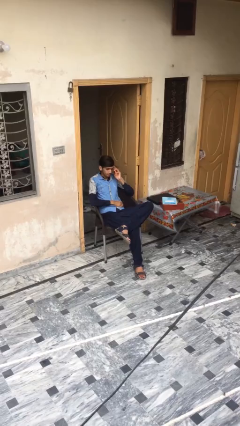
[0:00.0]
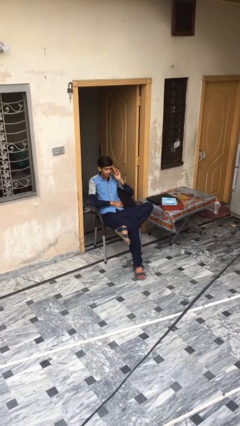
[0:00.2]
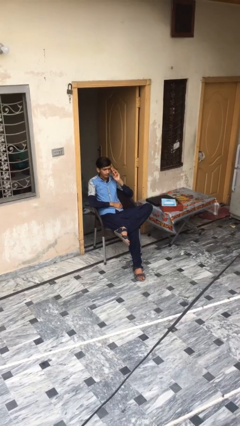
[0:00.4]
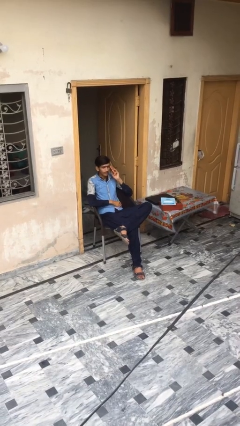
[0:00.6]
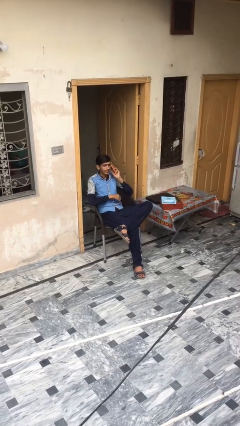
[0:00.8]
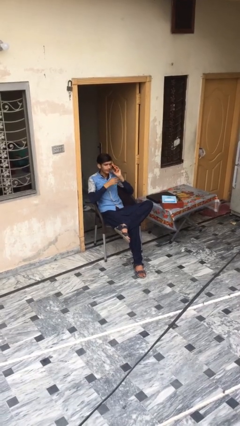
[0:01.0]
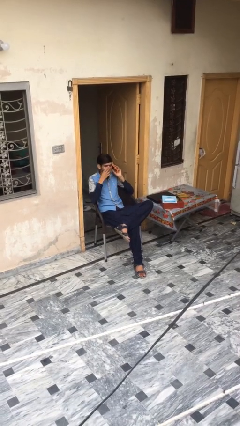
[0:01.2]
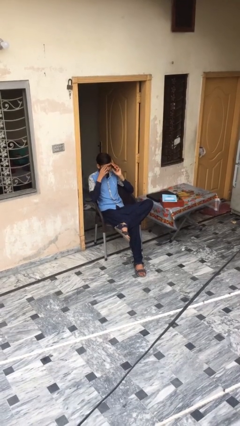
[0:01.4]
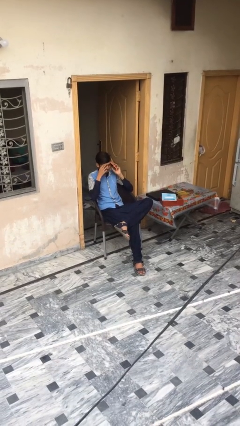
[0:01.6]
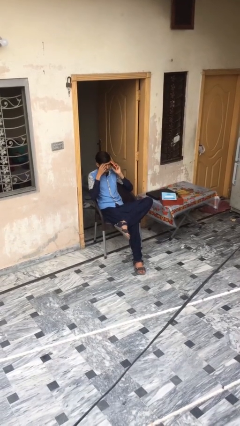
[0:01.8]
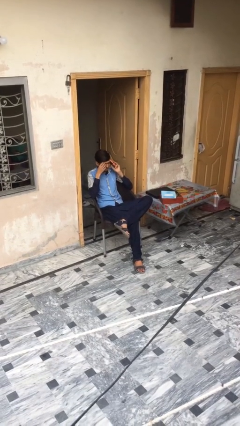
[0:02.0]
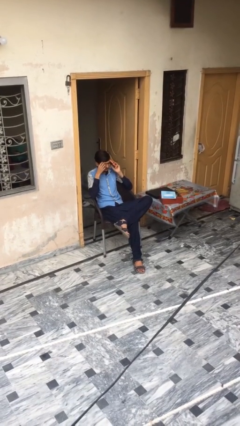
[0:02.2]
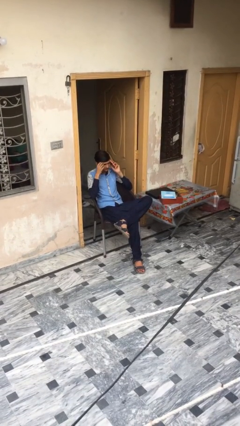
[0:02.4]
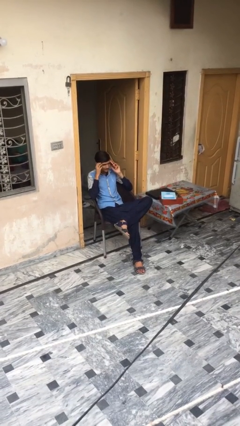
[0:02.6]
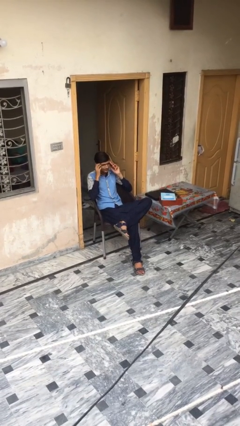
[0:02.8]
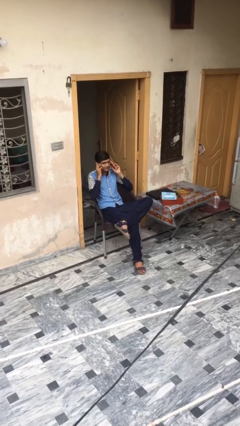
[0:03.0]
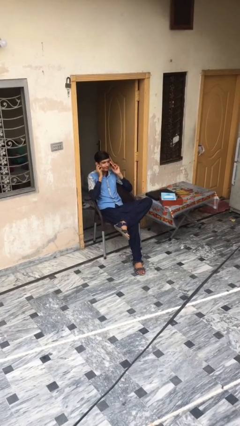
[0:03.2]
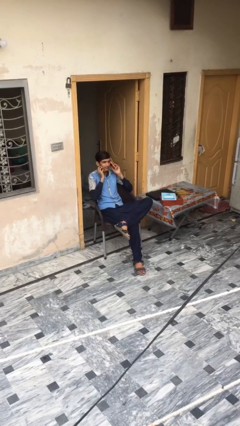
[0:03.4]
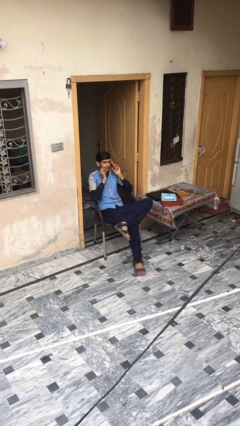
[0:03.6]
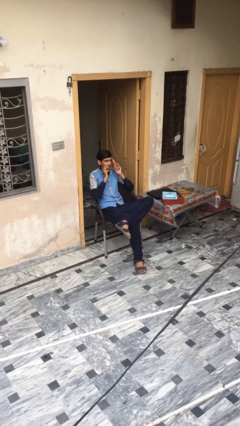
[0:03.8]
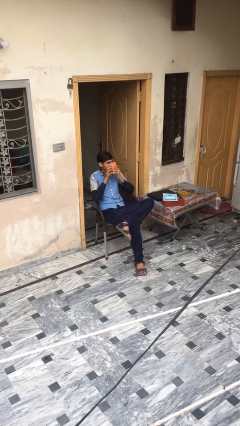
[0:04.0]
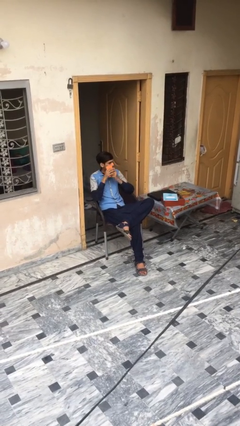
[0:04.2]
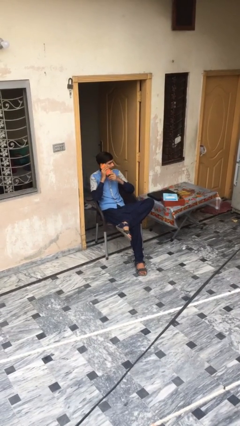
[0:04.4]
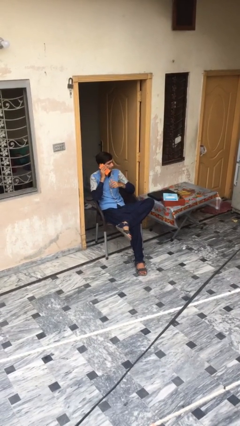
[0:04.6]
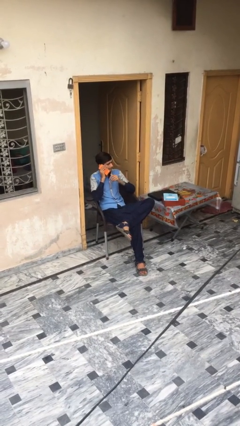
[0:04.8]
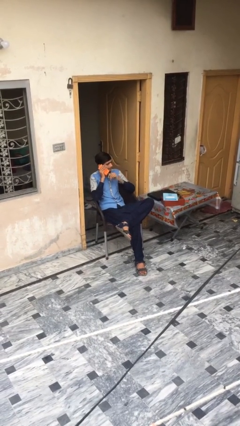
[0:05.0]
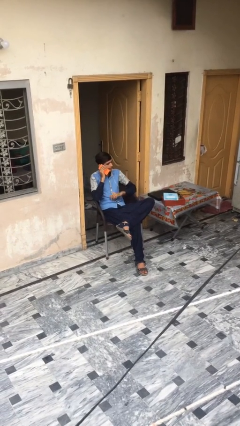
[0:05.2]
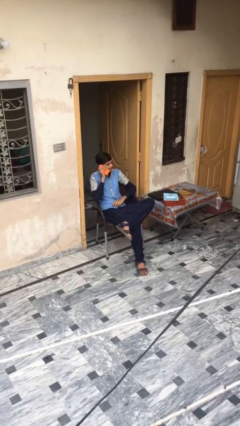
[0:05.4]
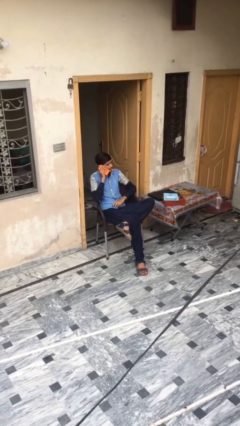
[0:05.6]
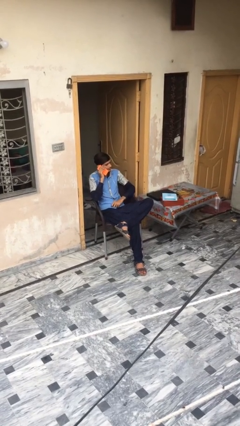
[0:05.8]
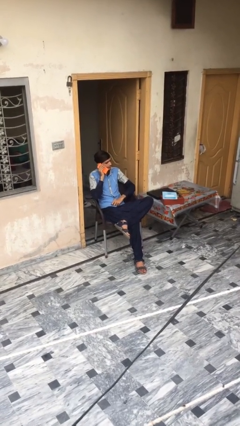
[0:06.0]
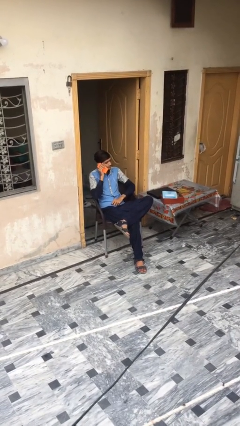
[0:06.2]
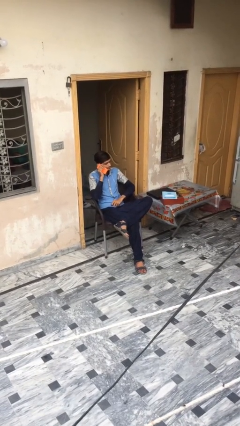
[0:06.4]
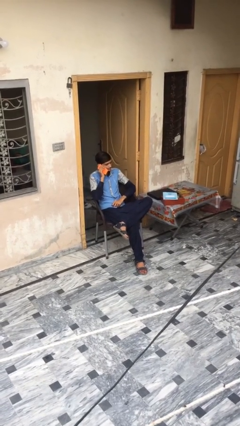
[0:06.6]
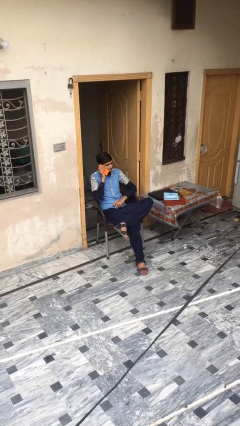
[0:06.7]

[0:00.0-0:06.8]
person talks on phone

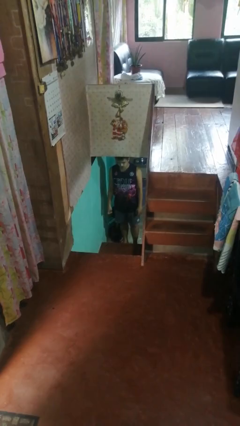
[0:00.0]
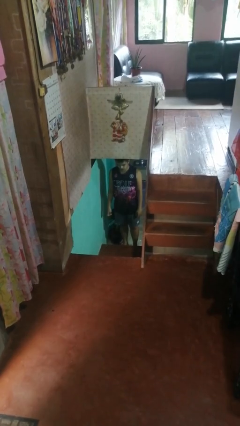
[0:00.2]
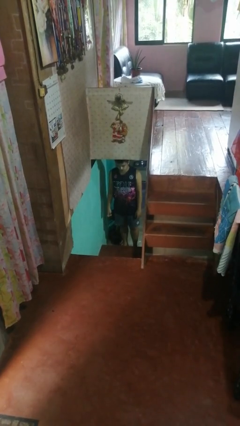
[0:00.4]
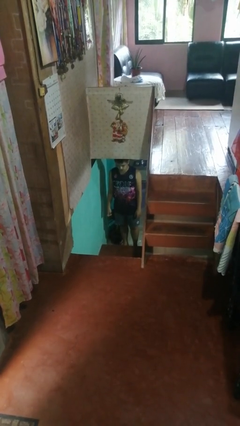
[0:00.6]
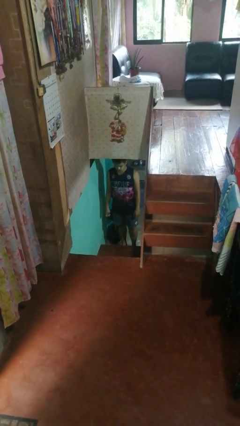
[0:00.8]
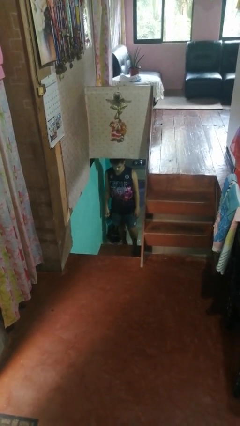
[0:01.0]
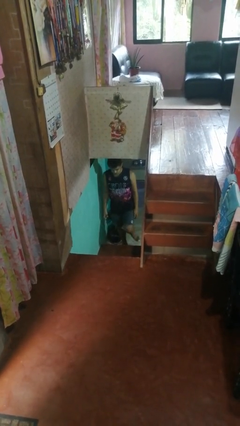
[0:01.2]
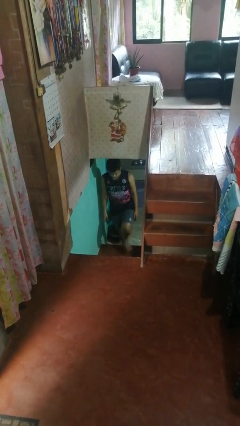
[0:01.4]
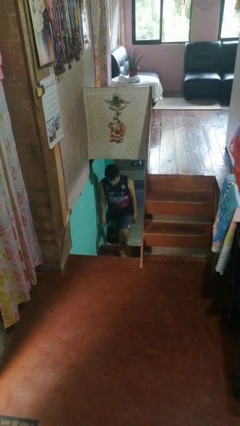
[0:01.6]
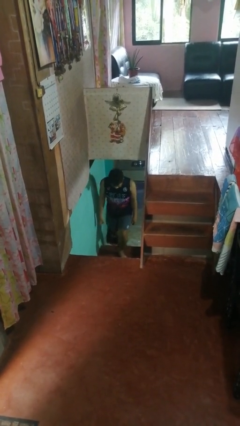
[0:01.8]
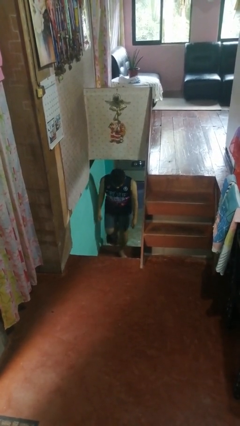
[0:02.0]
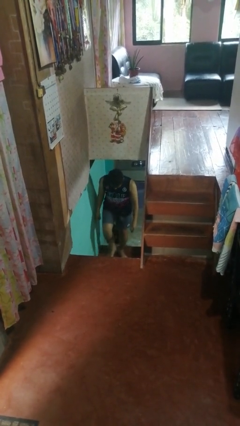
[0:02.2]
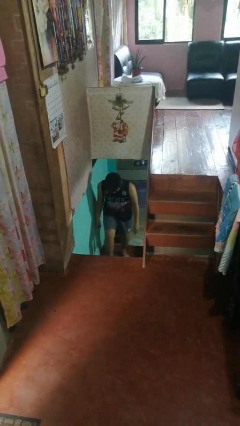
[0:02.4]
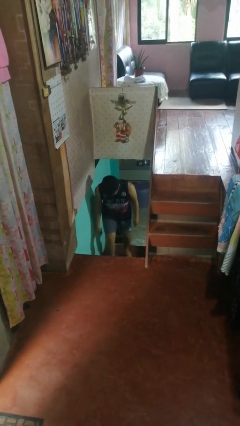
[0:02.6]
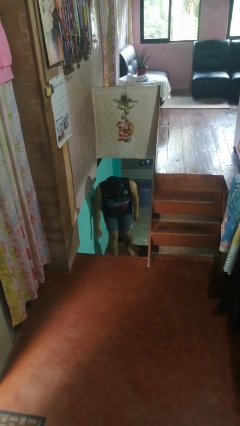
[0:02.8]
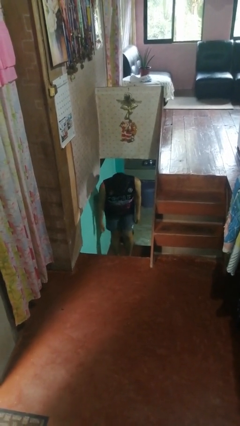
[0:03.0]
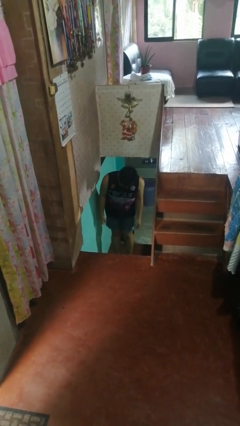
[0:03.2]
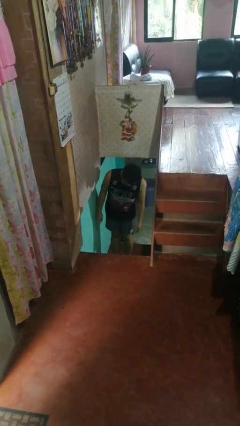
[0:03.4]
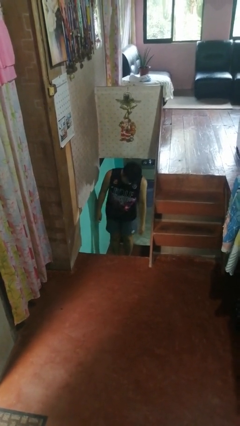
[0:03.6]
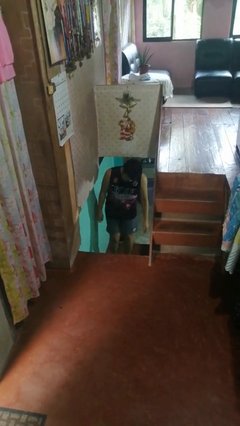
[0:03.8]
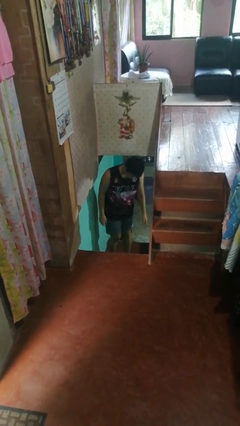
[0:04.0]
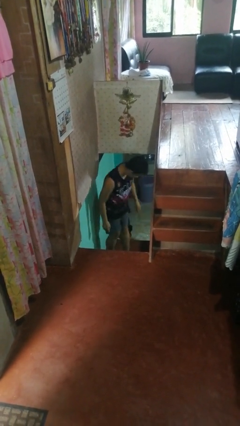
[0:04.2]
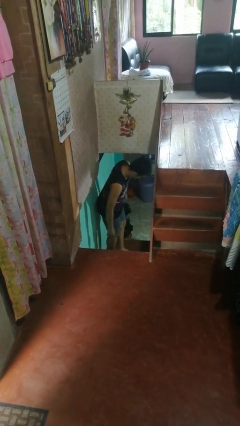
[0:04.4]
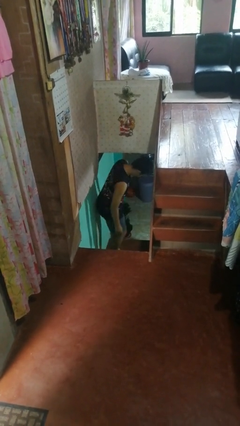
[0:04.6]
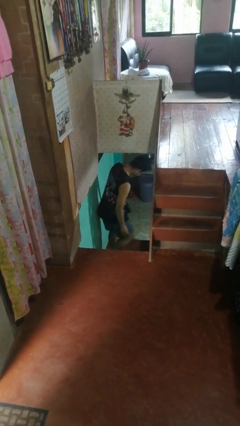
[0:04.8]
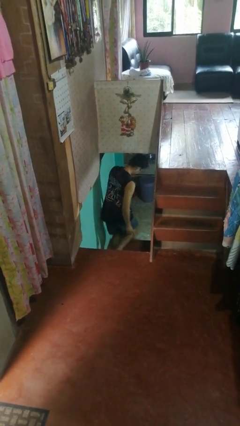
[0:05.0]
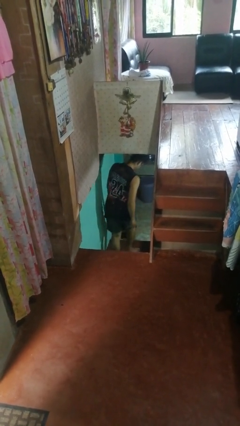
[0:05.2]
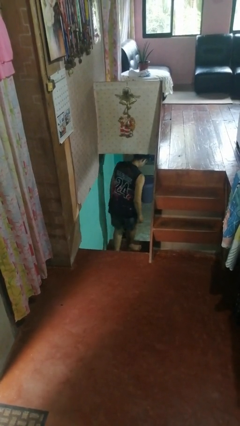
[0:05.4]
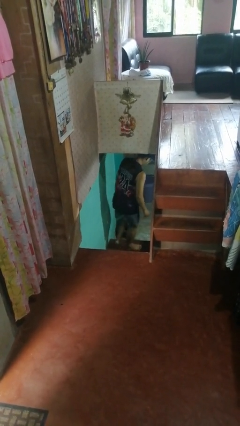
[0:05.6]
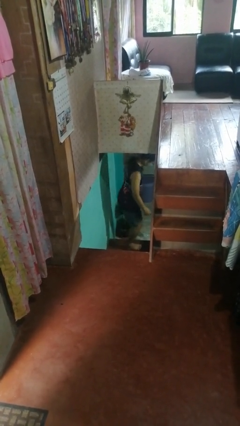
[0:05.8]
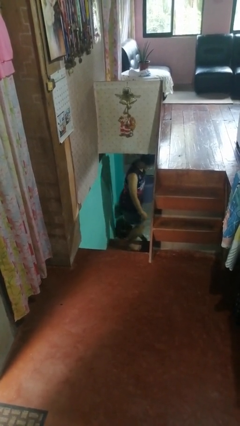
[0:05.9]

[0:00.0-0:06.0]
person climbs up stairs

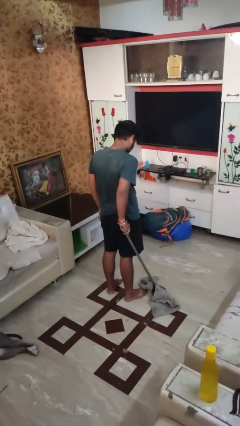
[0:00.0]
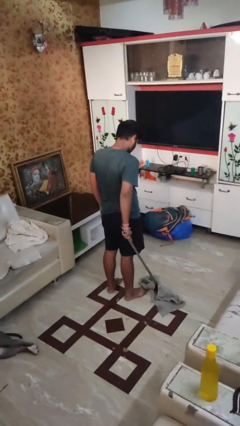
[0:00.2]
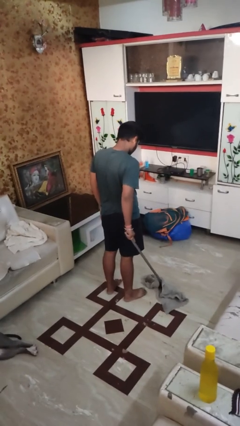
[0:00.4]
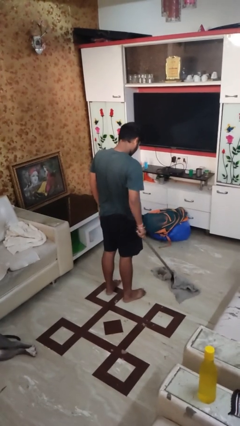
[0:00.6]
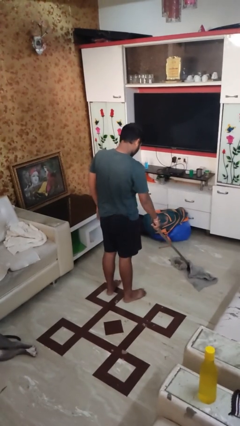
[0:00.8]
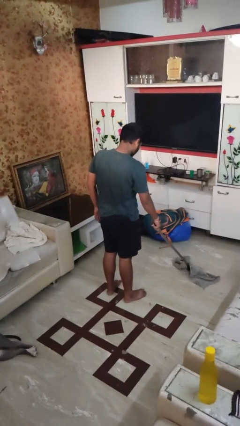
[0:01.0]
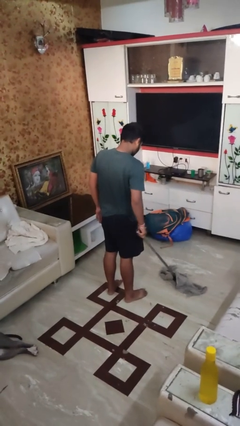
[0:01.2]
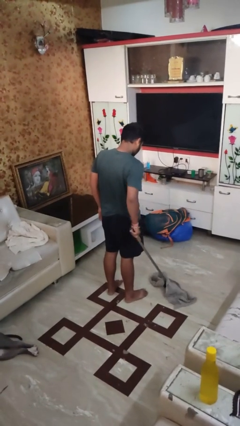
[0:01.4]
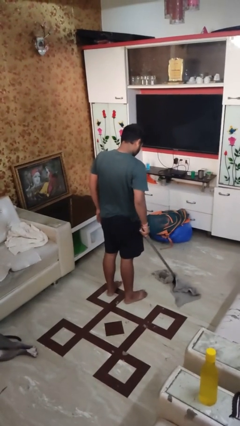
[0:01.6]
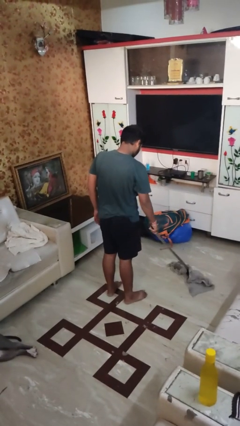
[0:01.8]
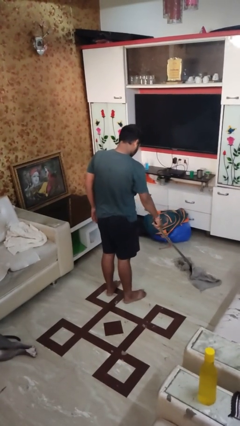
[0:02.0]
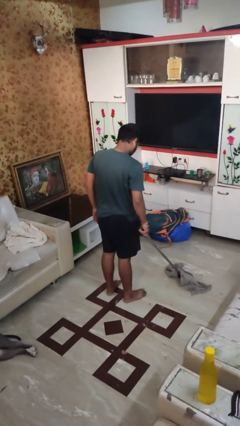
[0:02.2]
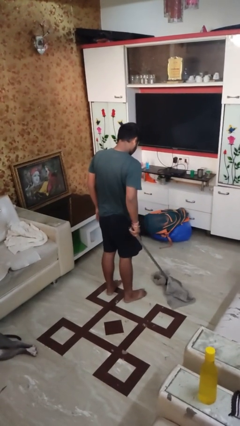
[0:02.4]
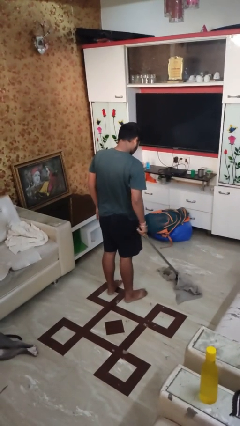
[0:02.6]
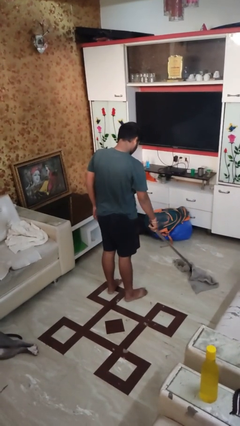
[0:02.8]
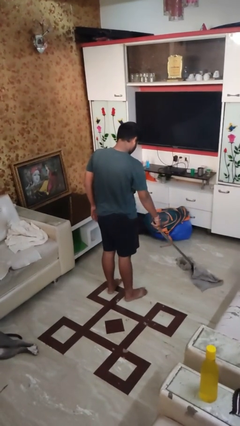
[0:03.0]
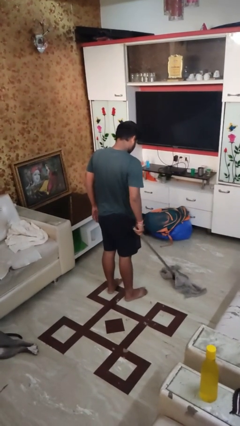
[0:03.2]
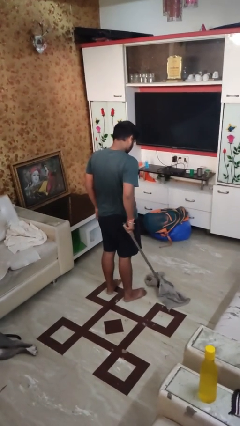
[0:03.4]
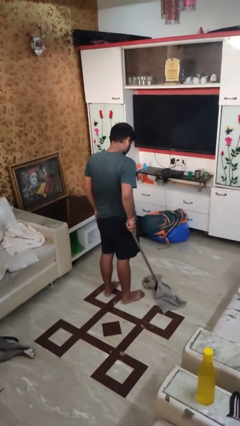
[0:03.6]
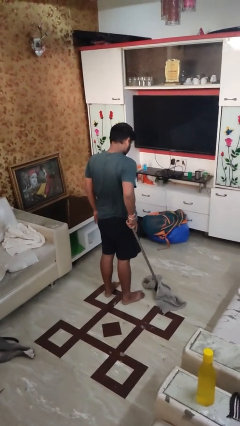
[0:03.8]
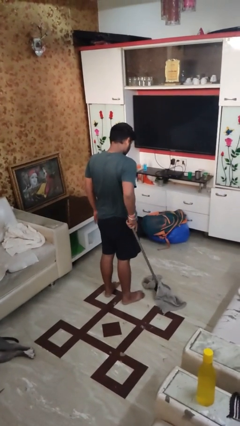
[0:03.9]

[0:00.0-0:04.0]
person mops

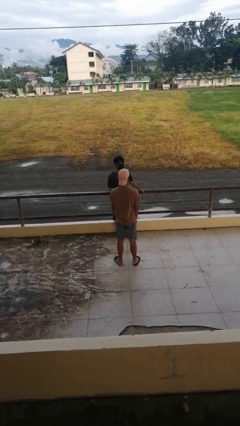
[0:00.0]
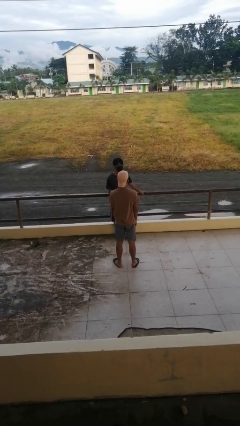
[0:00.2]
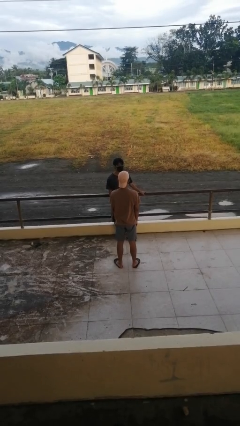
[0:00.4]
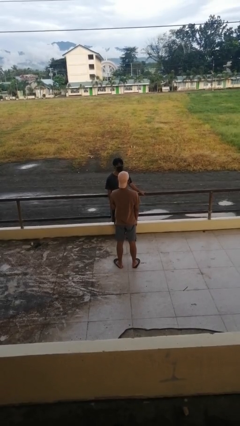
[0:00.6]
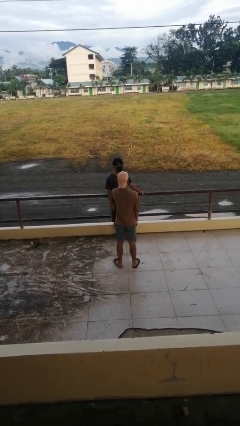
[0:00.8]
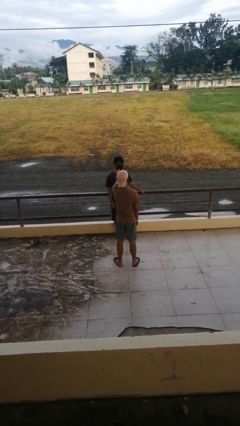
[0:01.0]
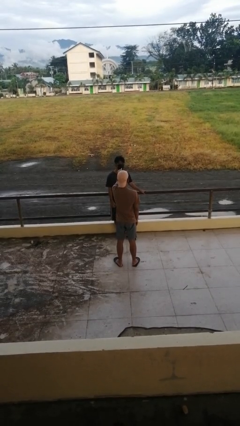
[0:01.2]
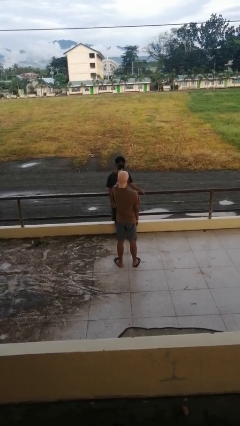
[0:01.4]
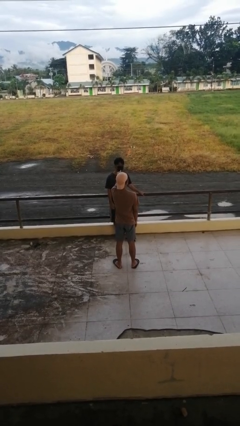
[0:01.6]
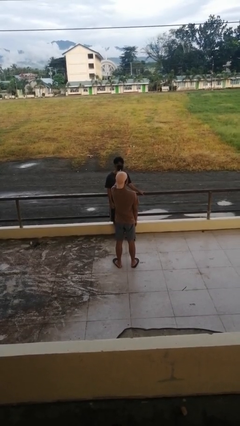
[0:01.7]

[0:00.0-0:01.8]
person points at person
